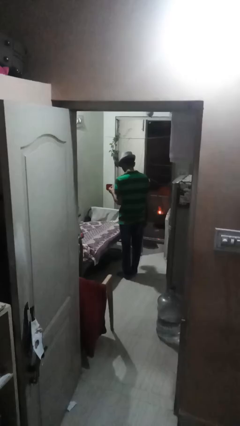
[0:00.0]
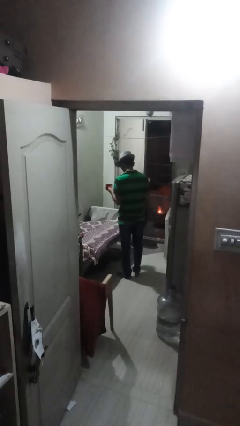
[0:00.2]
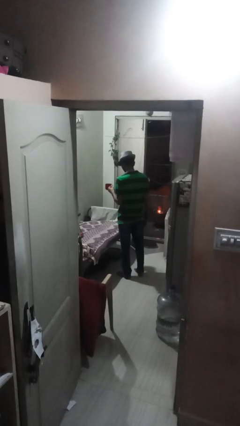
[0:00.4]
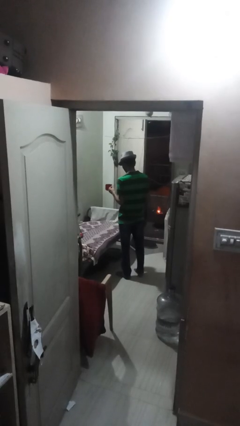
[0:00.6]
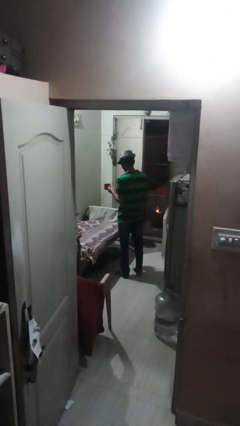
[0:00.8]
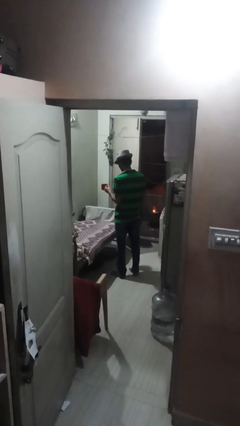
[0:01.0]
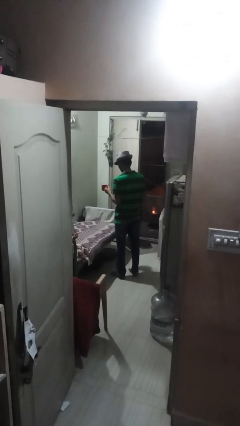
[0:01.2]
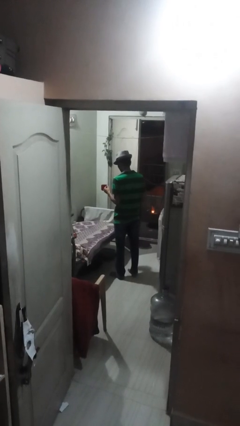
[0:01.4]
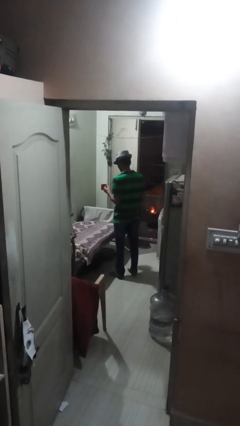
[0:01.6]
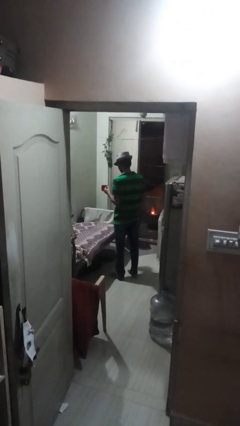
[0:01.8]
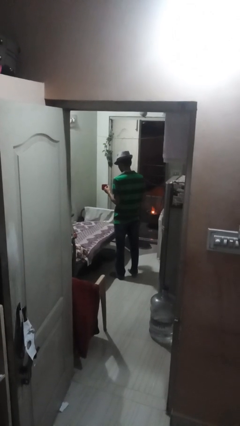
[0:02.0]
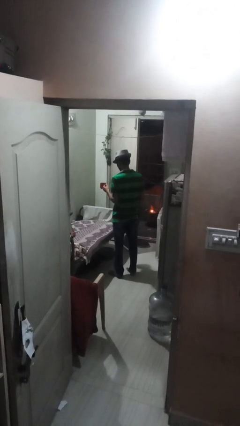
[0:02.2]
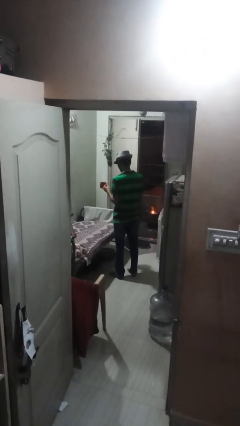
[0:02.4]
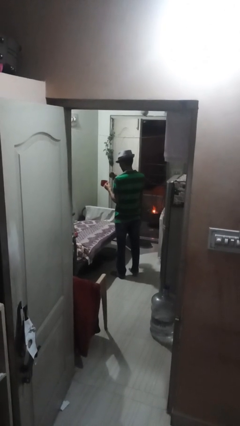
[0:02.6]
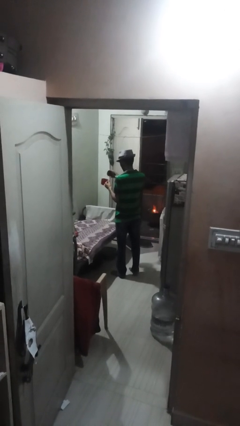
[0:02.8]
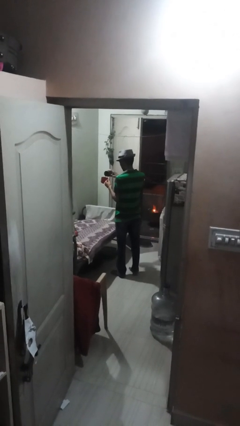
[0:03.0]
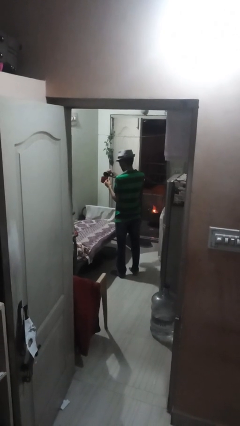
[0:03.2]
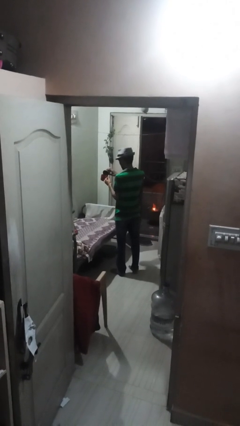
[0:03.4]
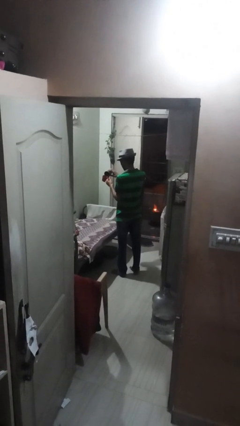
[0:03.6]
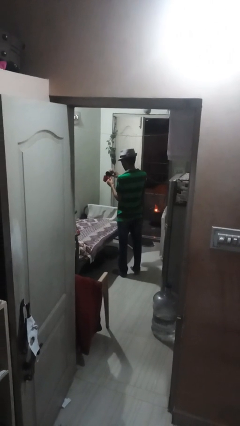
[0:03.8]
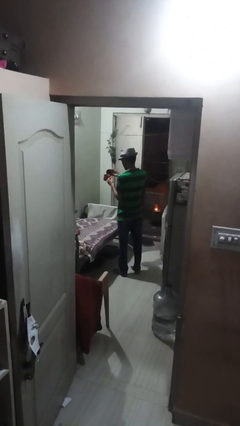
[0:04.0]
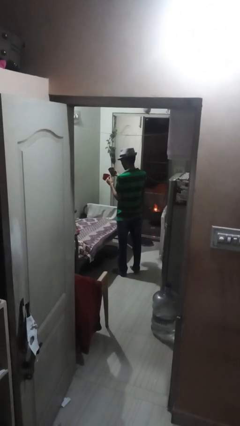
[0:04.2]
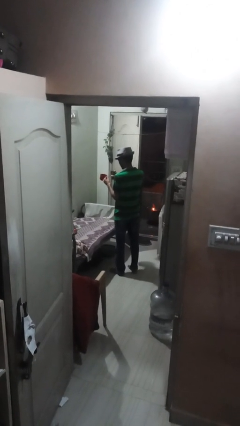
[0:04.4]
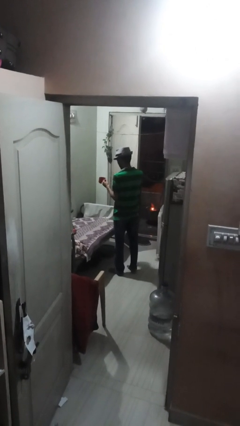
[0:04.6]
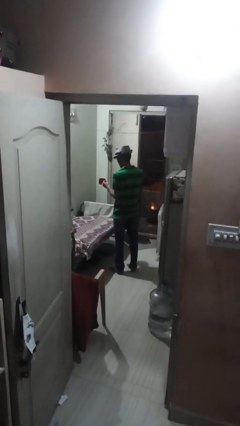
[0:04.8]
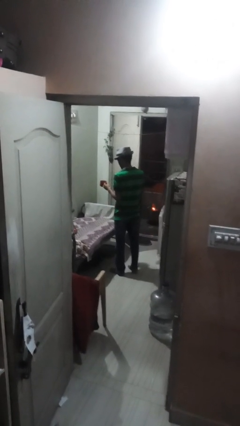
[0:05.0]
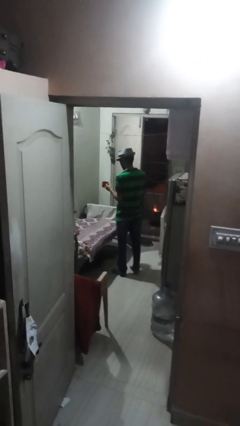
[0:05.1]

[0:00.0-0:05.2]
person pours coffee into mug

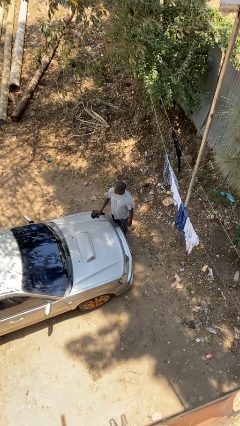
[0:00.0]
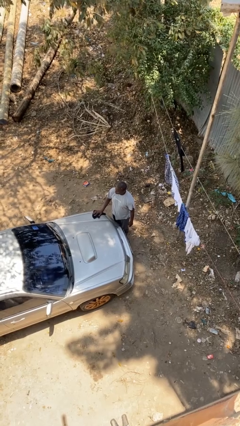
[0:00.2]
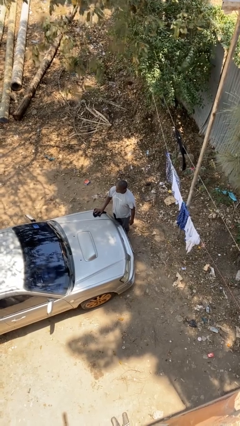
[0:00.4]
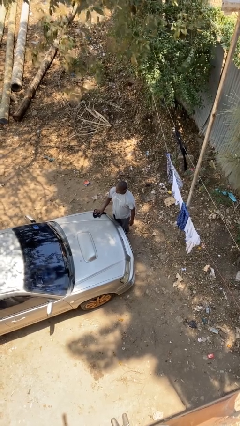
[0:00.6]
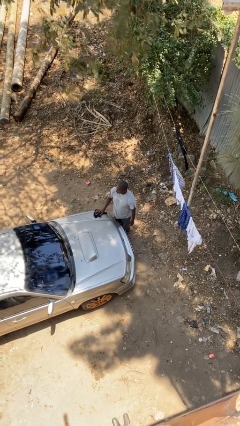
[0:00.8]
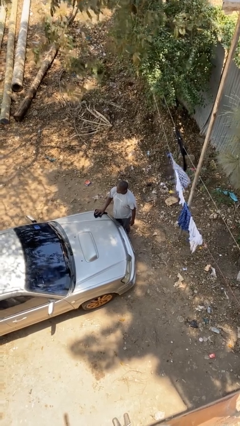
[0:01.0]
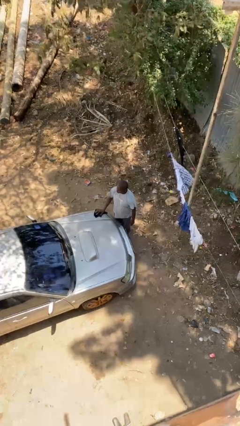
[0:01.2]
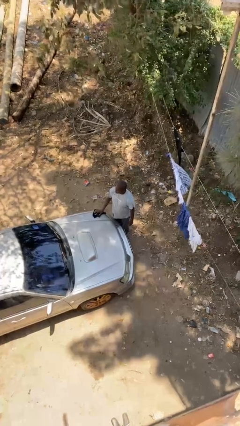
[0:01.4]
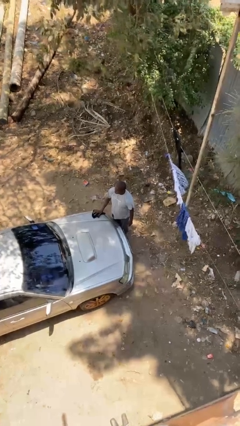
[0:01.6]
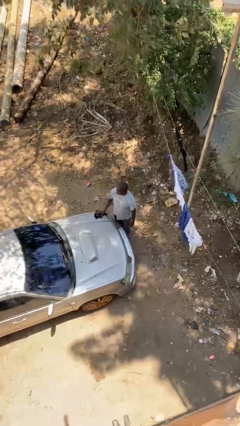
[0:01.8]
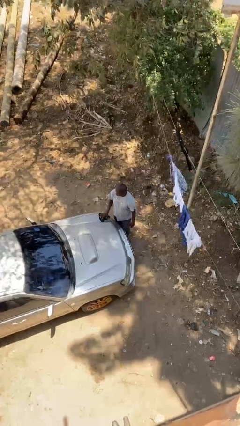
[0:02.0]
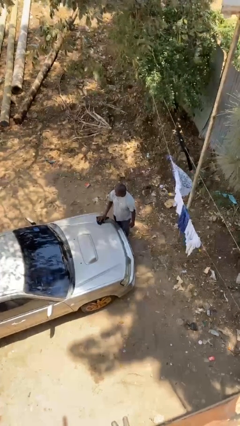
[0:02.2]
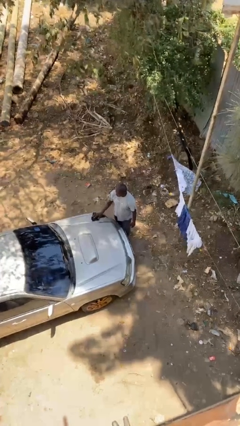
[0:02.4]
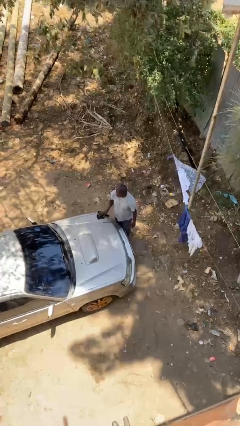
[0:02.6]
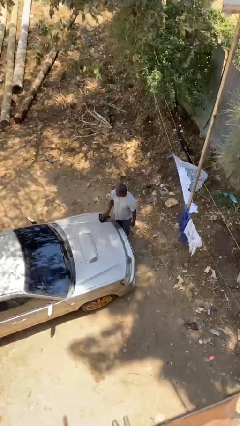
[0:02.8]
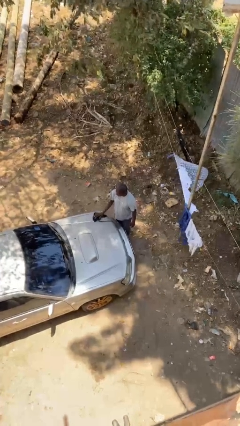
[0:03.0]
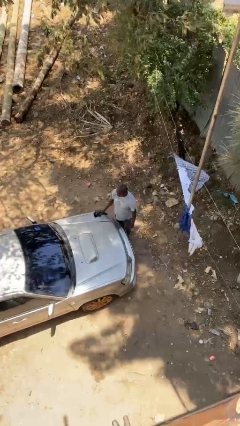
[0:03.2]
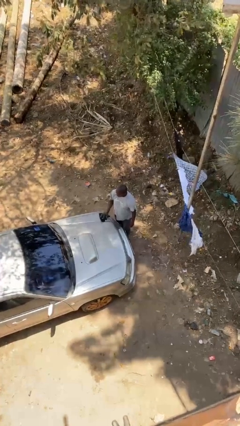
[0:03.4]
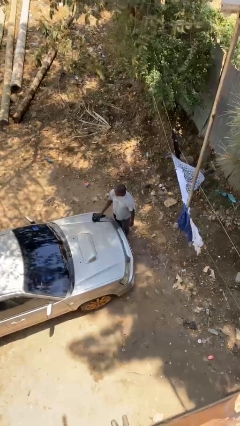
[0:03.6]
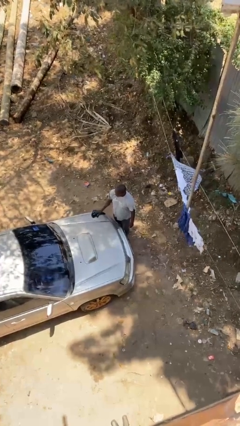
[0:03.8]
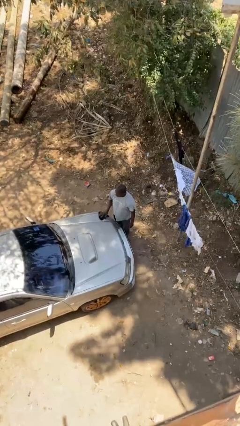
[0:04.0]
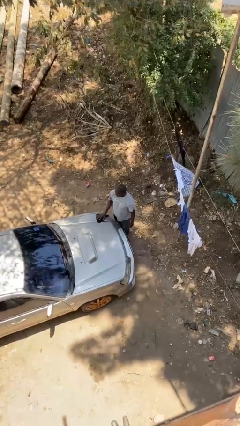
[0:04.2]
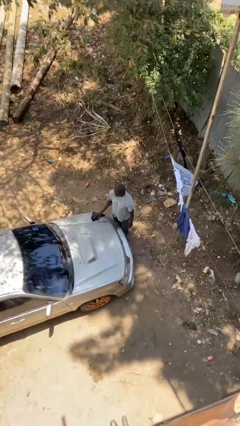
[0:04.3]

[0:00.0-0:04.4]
person polishes car with rag

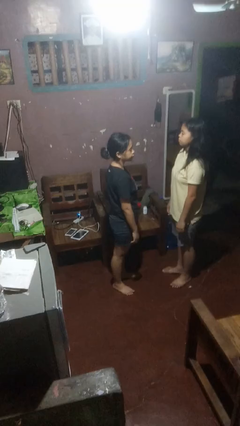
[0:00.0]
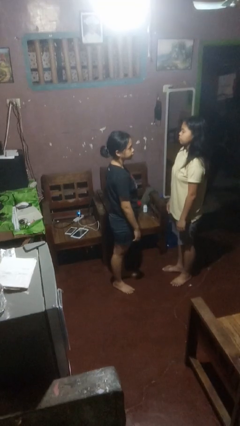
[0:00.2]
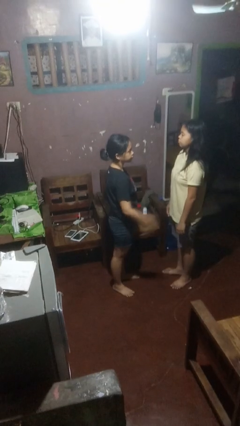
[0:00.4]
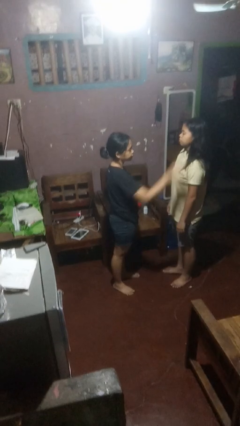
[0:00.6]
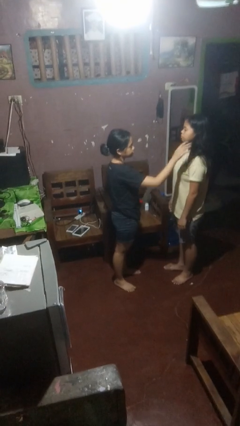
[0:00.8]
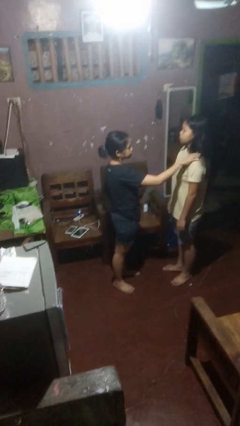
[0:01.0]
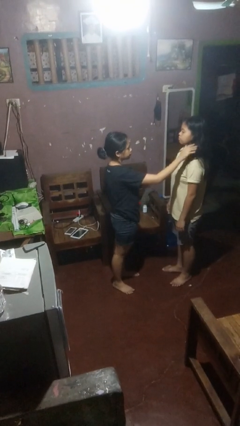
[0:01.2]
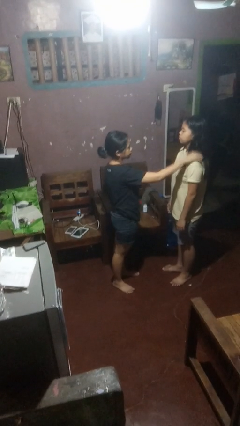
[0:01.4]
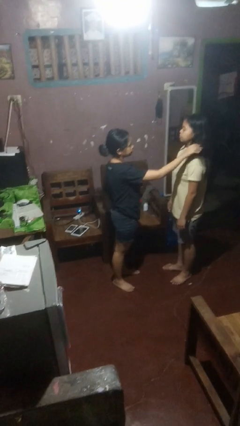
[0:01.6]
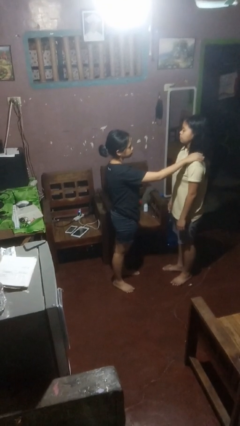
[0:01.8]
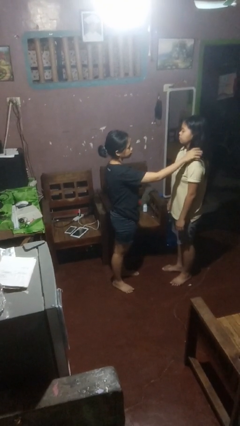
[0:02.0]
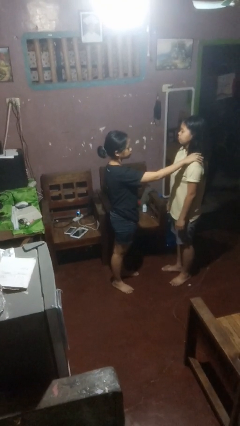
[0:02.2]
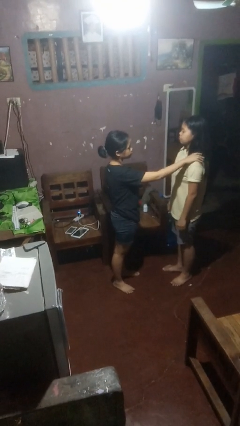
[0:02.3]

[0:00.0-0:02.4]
person pounds shoulders of person

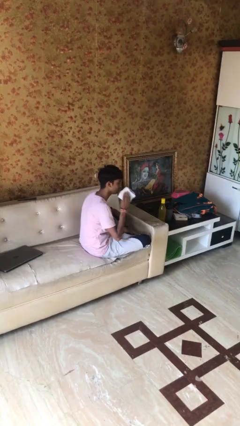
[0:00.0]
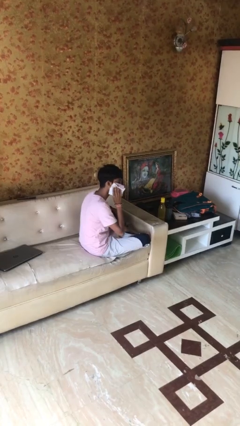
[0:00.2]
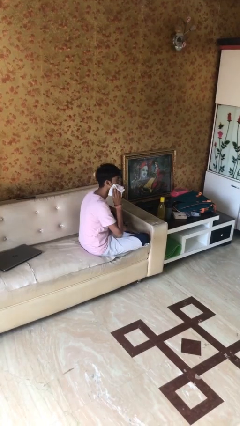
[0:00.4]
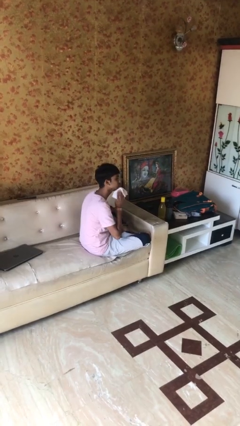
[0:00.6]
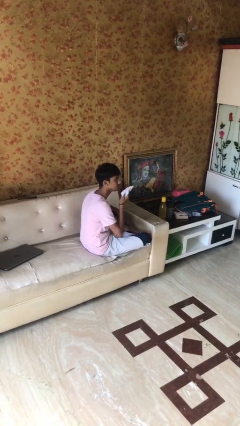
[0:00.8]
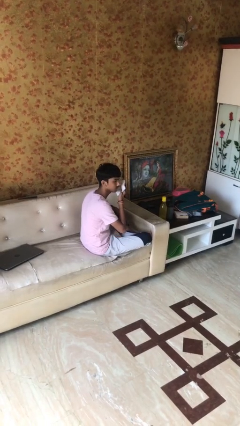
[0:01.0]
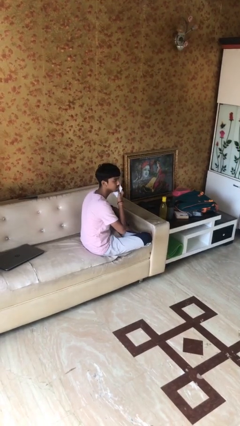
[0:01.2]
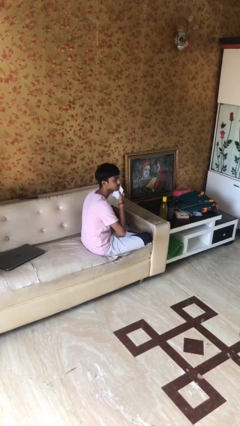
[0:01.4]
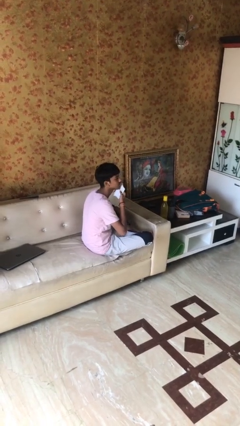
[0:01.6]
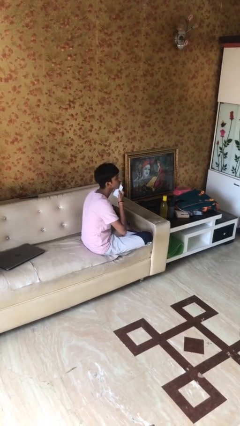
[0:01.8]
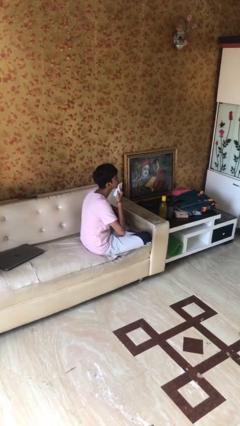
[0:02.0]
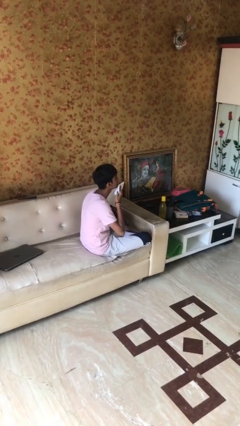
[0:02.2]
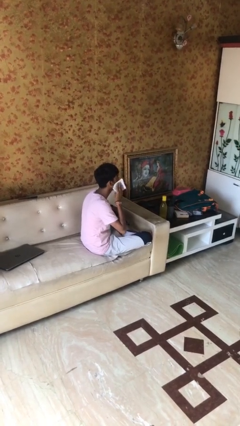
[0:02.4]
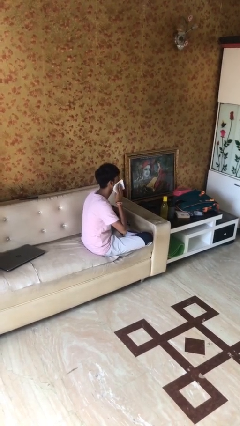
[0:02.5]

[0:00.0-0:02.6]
person wipes mouth with napkin

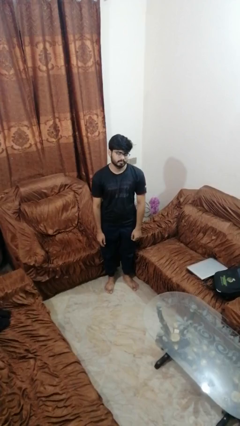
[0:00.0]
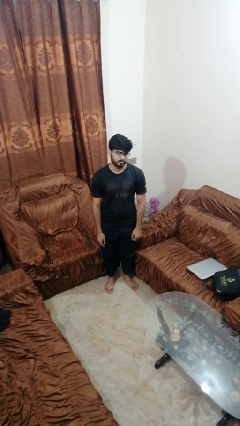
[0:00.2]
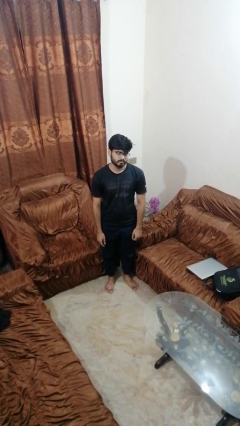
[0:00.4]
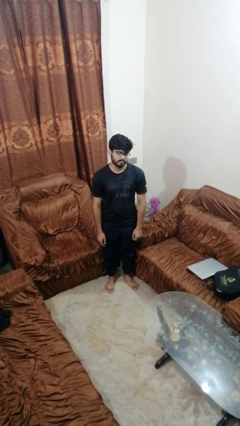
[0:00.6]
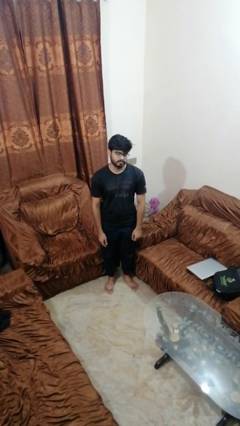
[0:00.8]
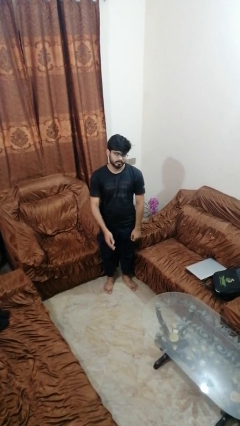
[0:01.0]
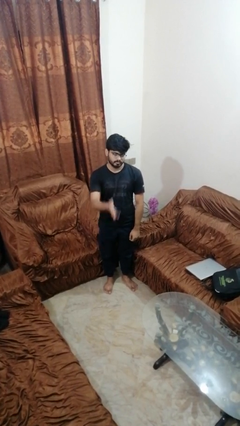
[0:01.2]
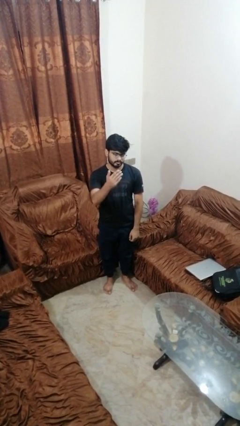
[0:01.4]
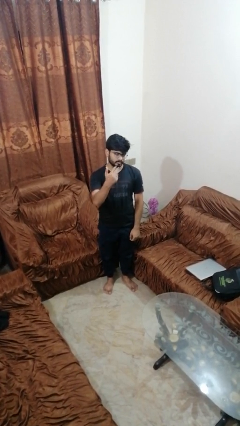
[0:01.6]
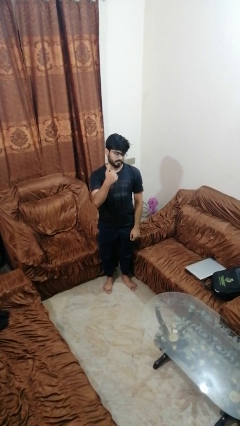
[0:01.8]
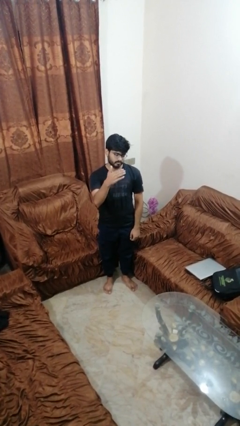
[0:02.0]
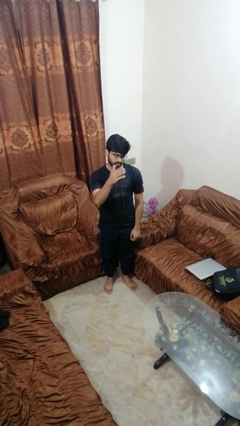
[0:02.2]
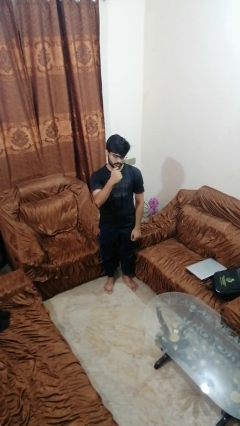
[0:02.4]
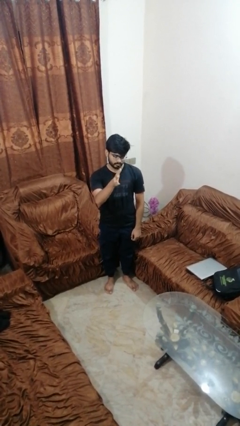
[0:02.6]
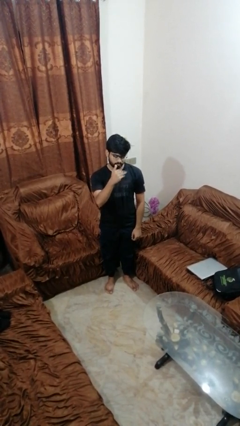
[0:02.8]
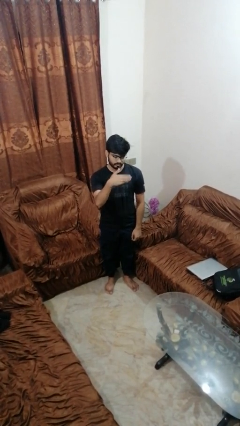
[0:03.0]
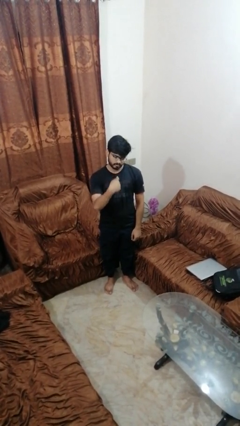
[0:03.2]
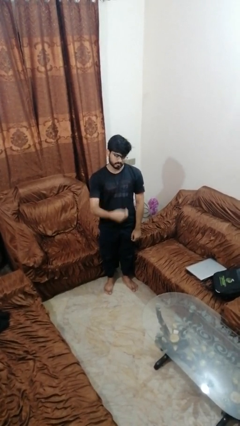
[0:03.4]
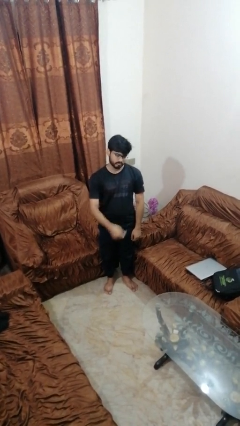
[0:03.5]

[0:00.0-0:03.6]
person gestures come here
